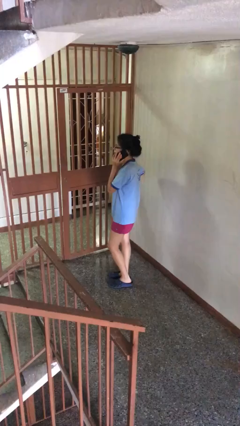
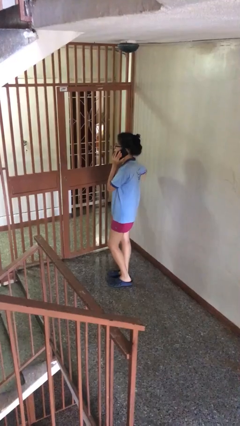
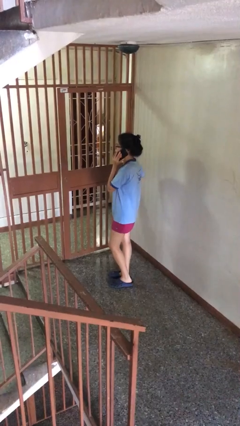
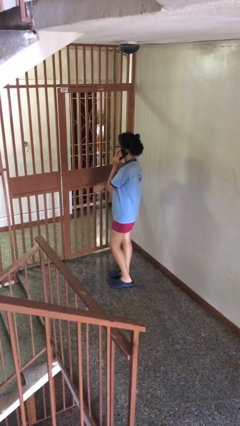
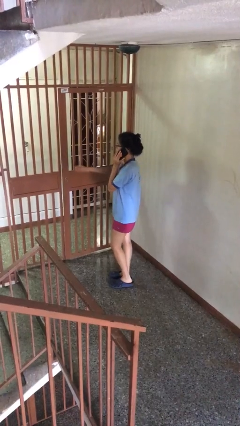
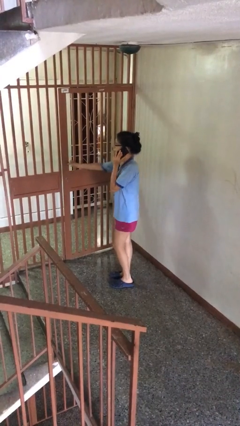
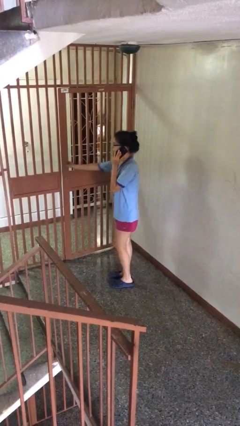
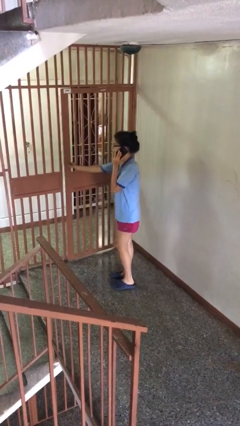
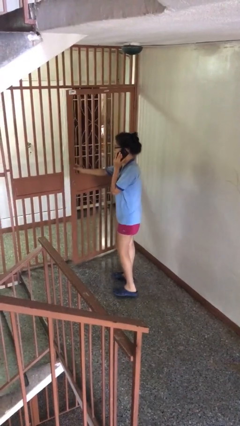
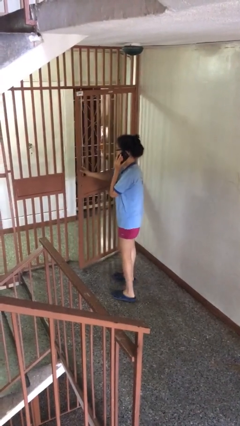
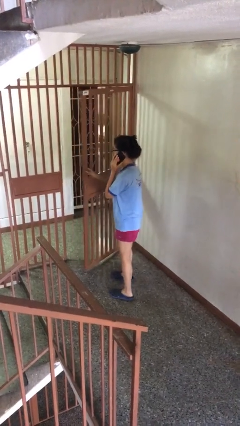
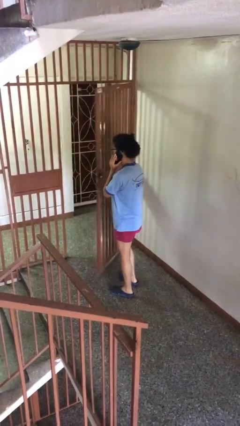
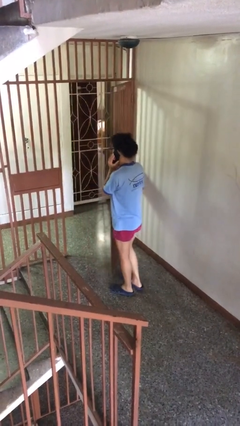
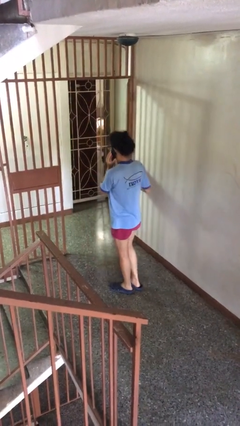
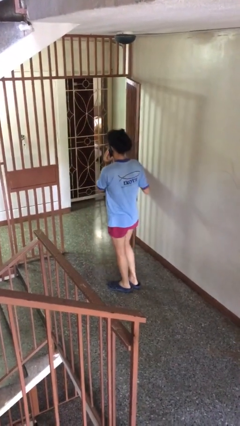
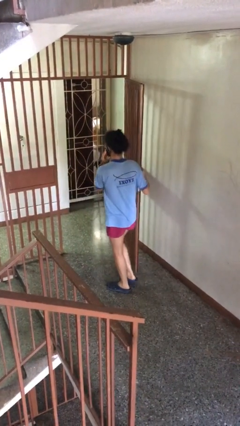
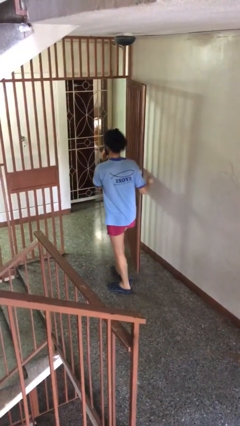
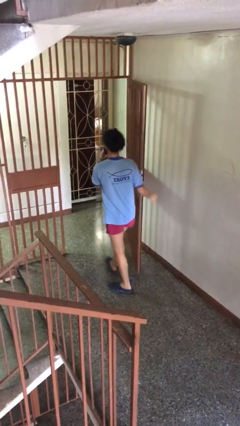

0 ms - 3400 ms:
person opens facility door

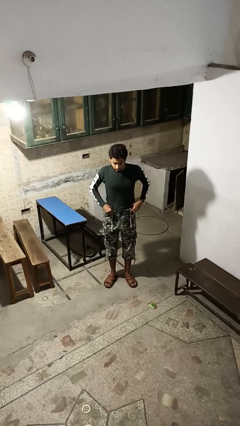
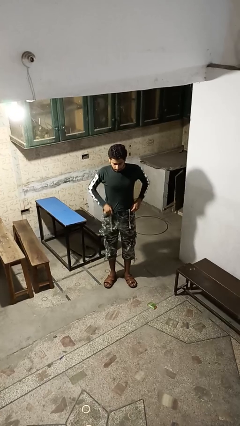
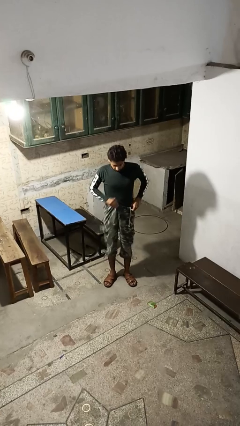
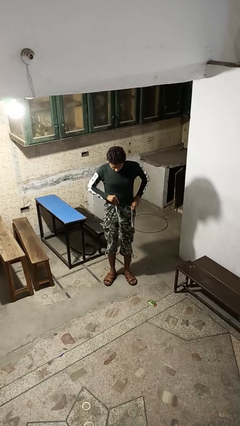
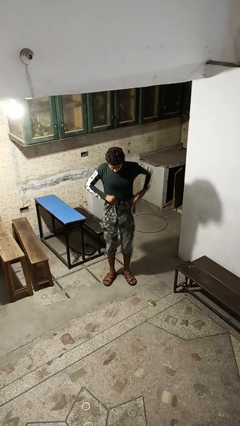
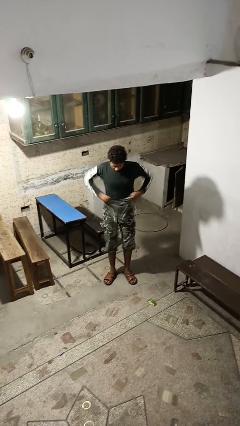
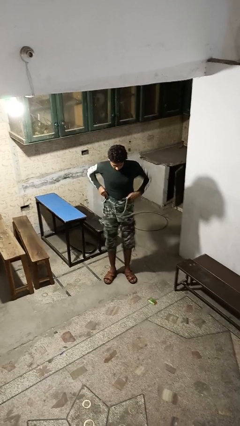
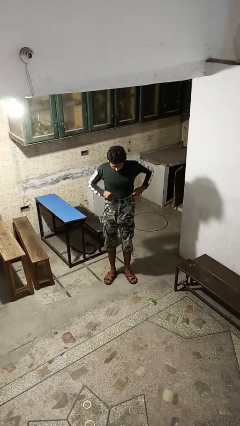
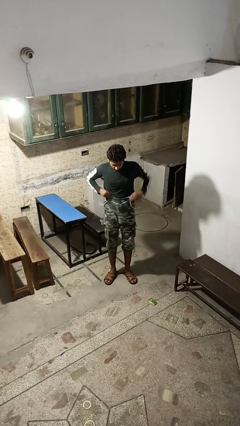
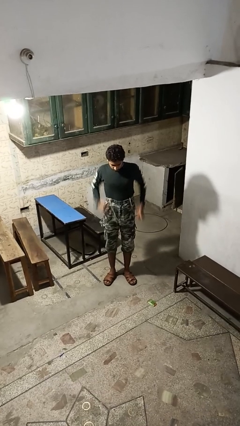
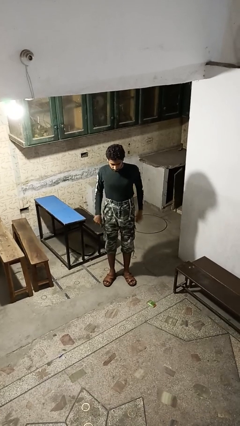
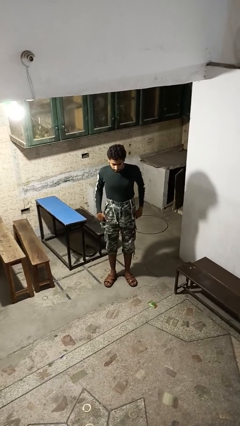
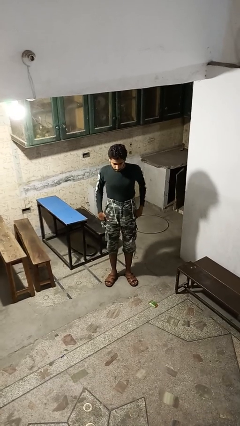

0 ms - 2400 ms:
person hikes up pants

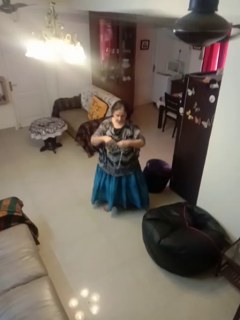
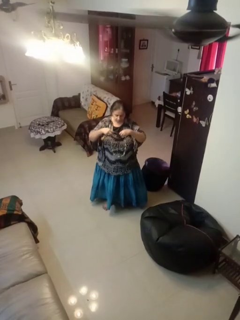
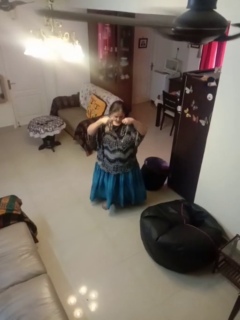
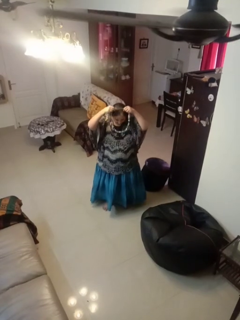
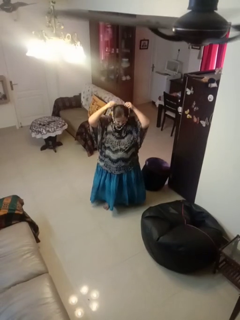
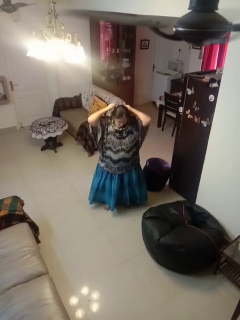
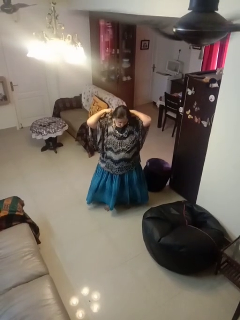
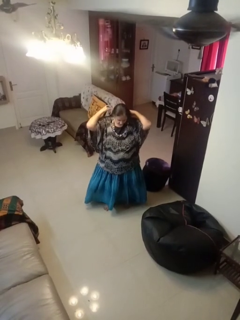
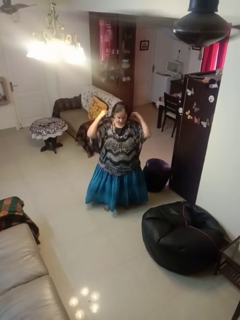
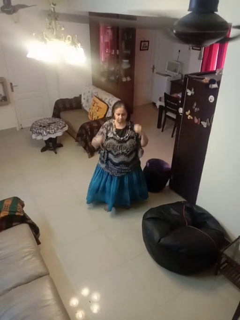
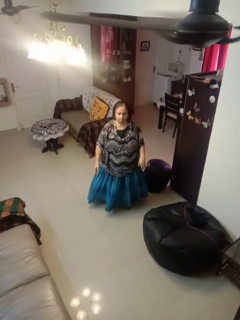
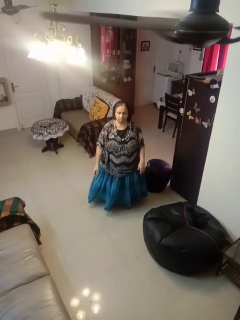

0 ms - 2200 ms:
person puts on necklace

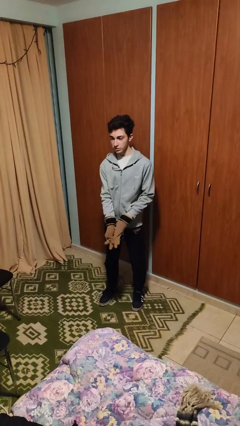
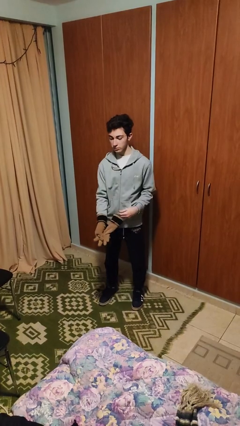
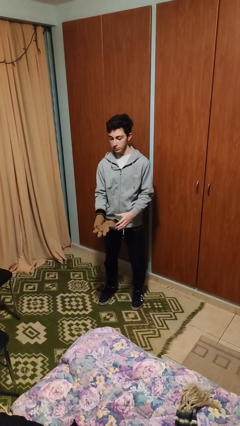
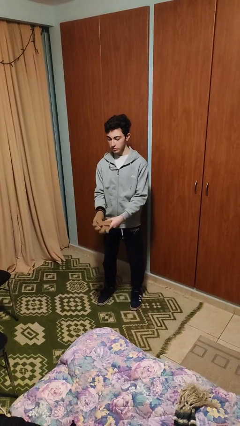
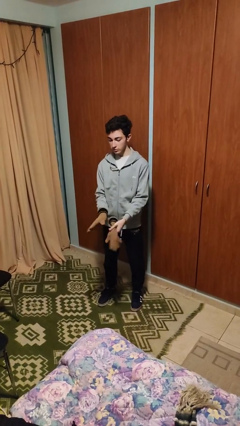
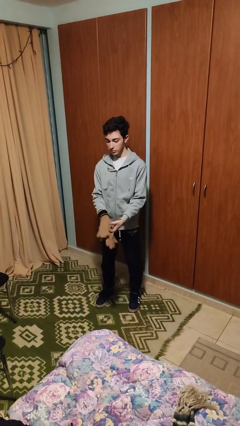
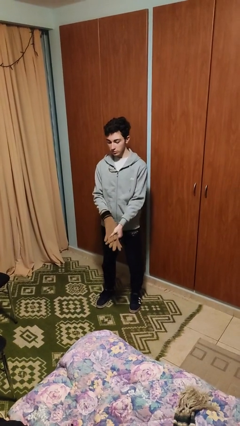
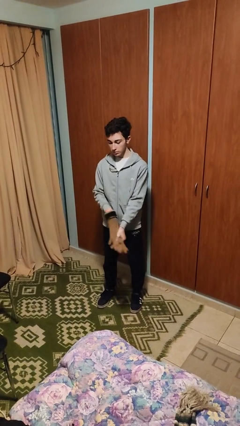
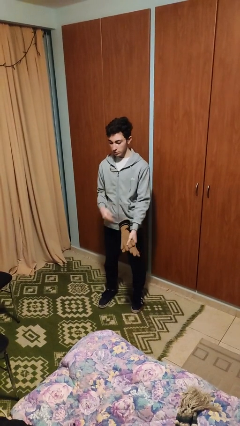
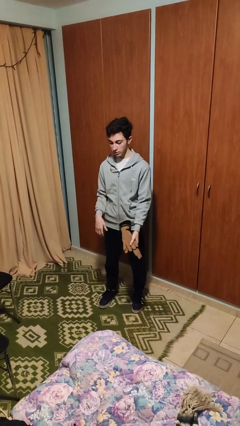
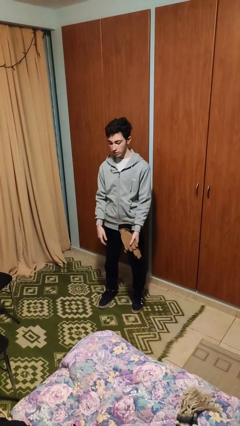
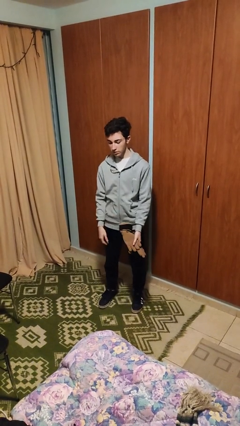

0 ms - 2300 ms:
person takes off gloves

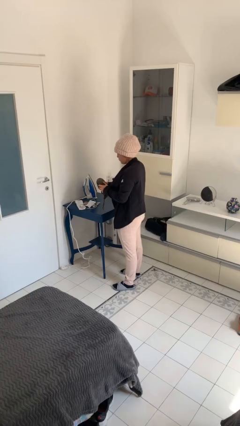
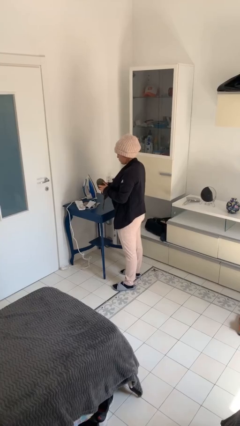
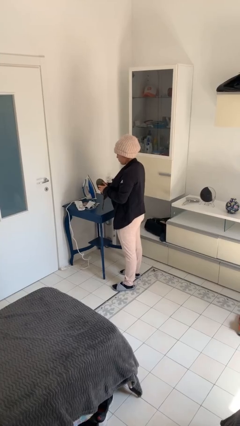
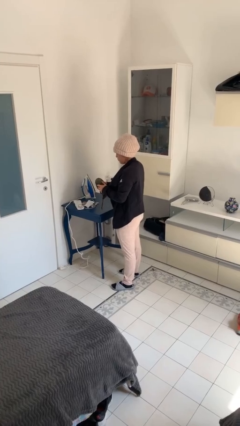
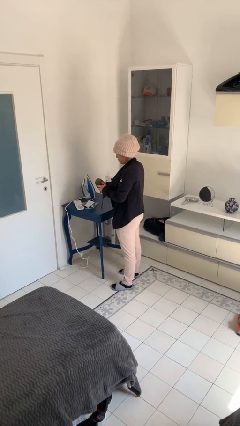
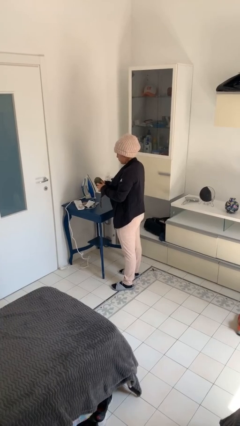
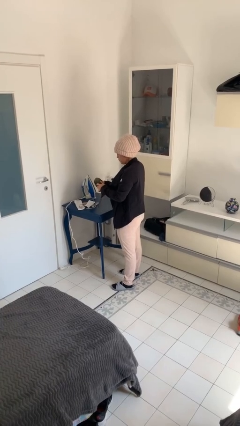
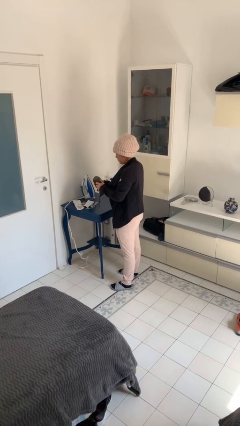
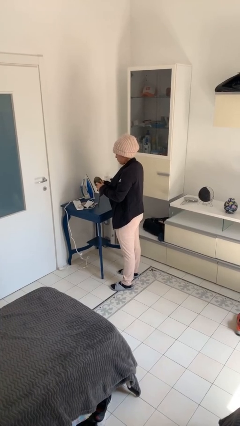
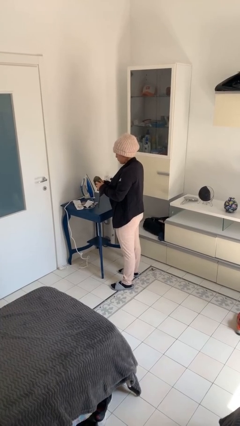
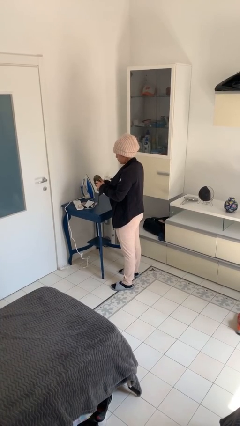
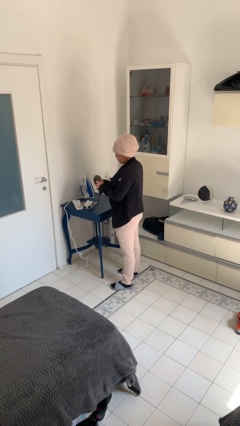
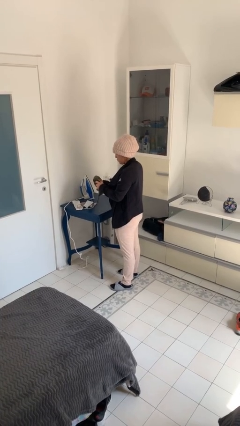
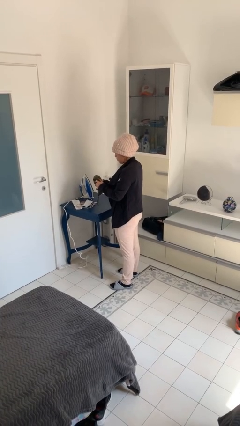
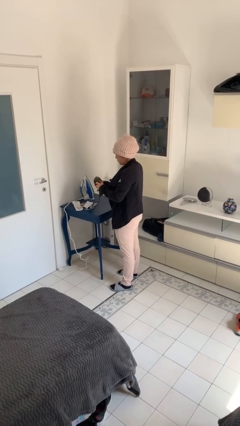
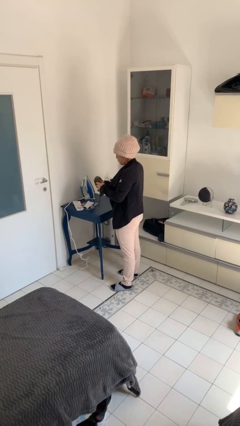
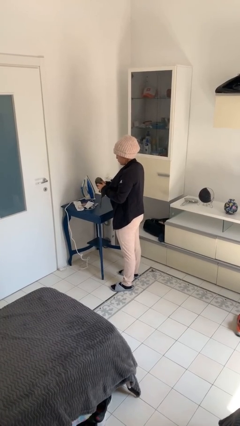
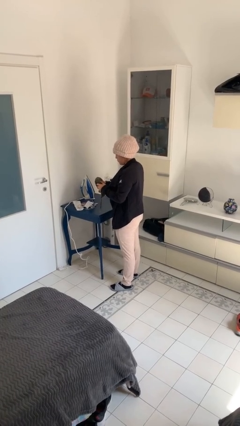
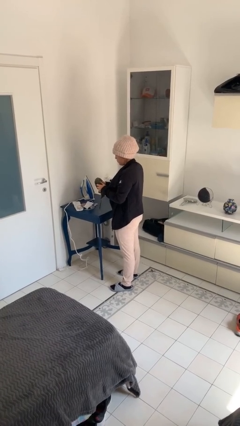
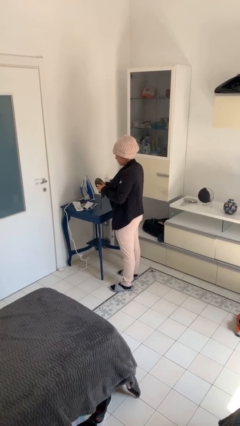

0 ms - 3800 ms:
person squeezes object

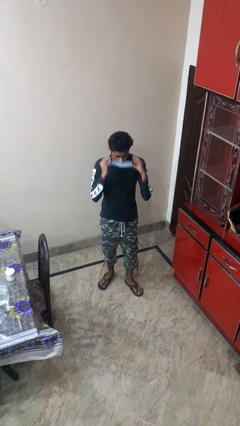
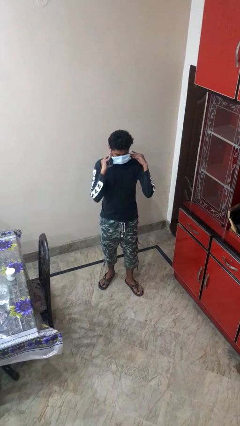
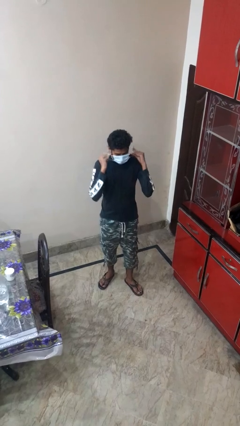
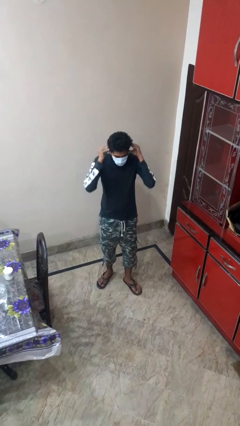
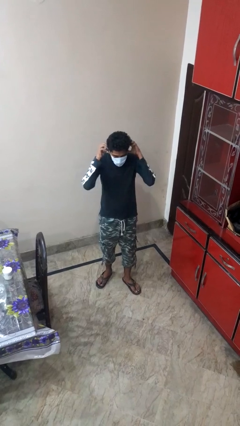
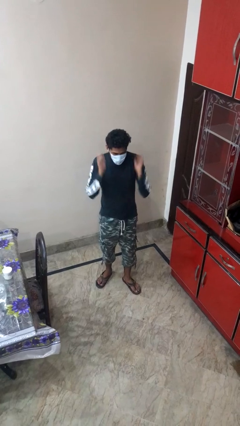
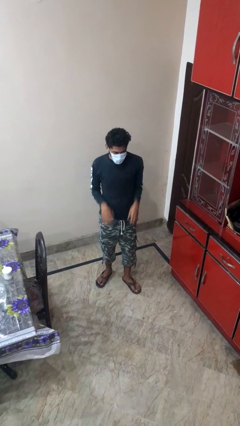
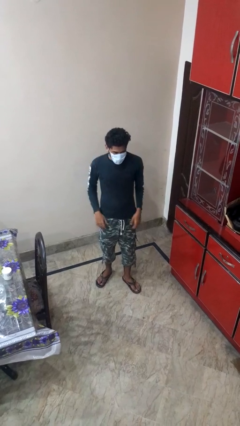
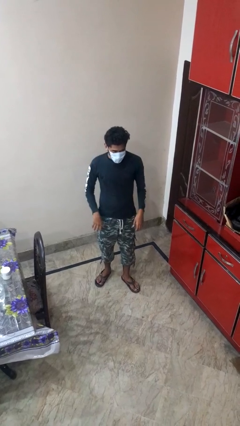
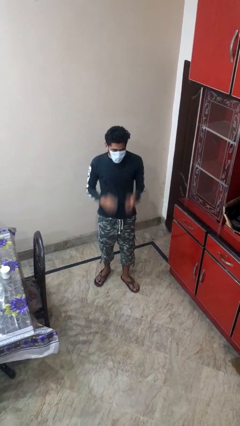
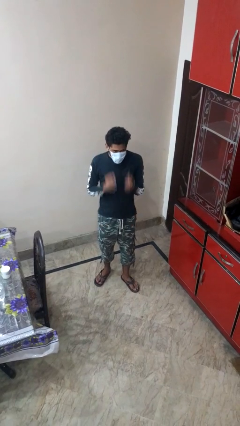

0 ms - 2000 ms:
person puts on facemask

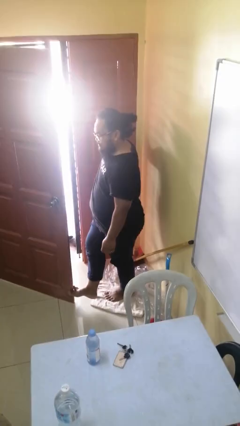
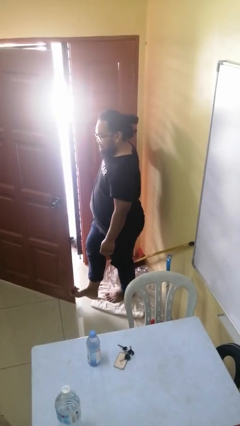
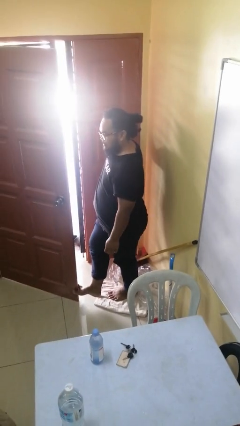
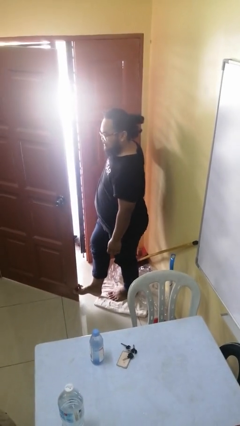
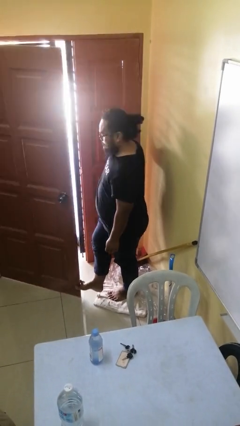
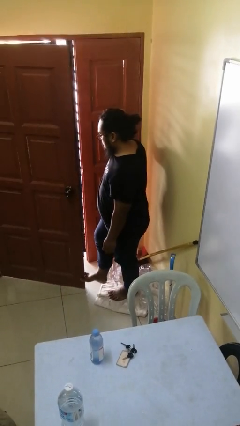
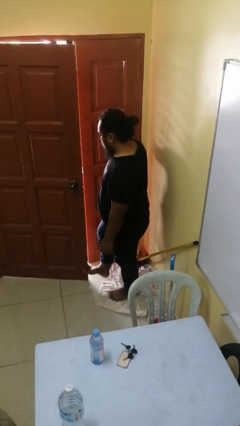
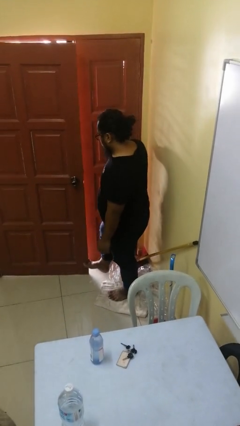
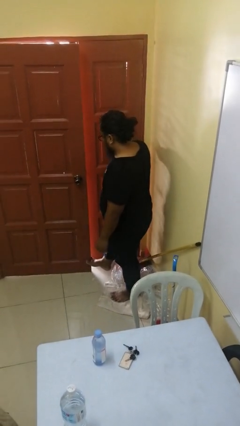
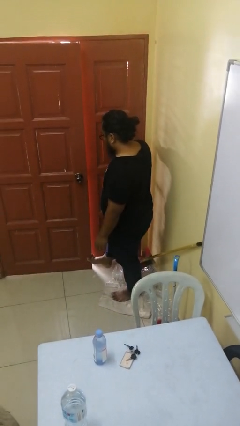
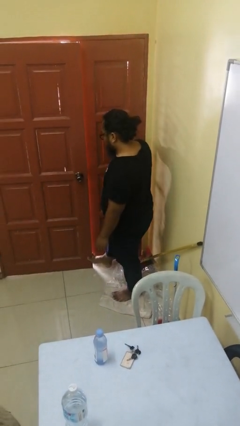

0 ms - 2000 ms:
person closes door with foot
